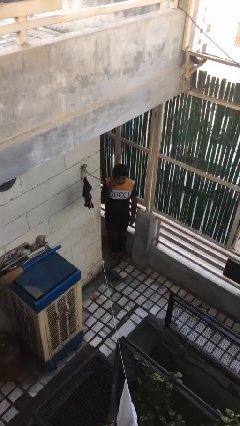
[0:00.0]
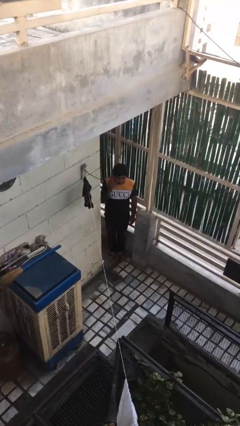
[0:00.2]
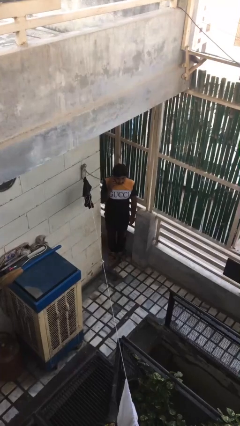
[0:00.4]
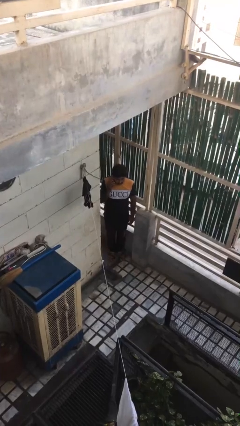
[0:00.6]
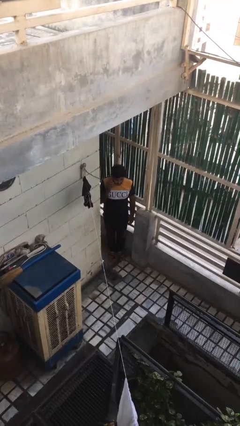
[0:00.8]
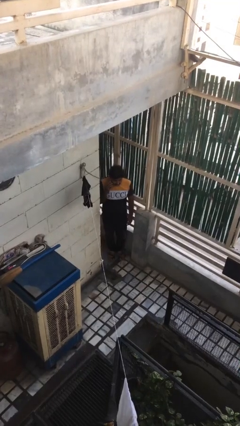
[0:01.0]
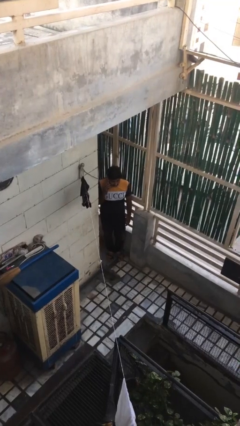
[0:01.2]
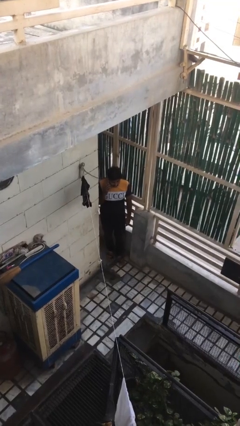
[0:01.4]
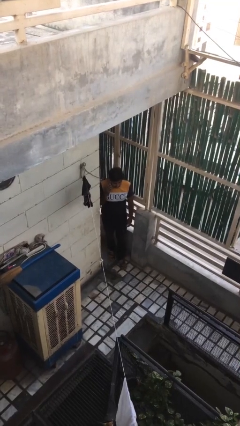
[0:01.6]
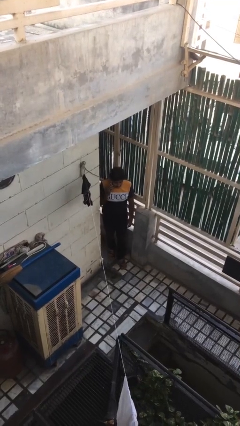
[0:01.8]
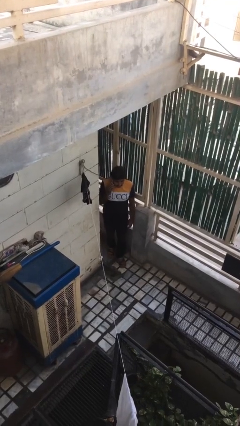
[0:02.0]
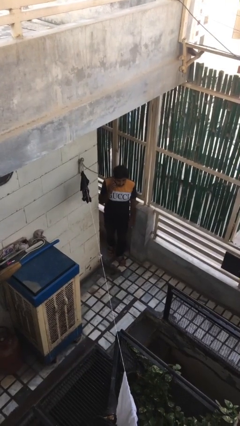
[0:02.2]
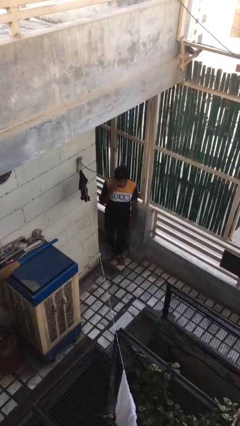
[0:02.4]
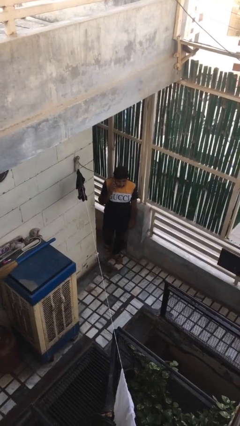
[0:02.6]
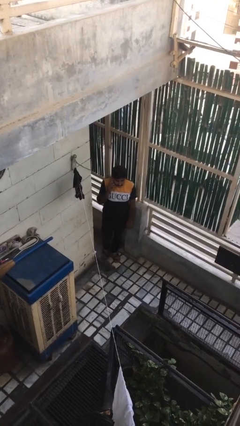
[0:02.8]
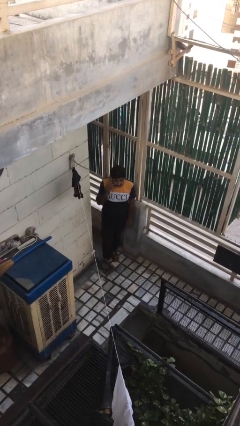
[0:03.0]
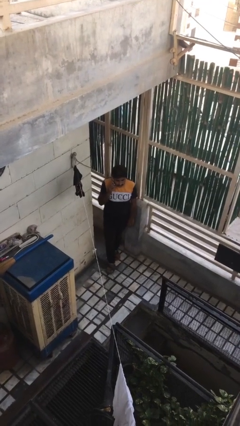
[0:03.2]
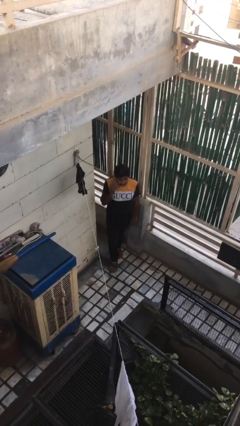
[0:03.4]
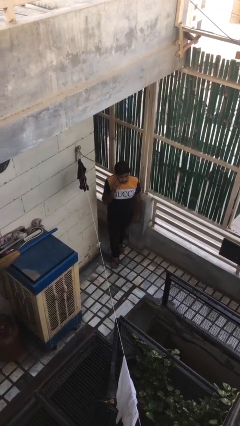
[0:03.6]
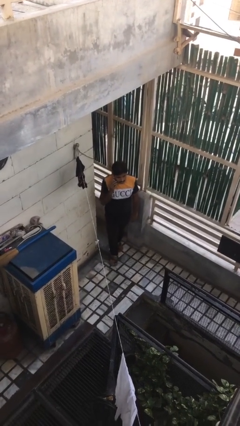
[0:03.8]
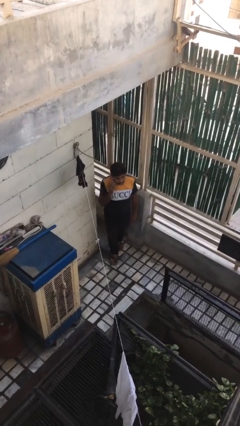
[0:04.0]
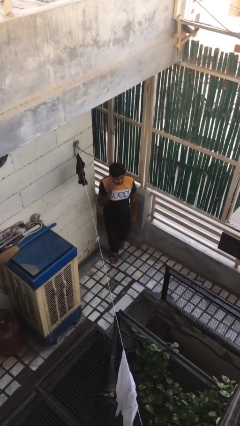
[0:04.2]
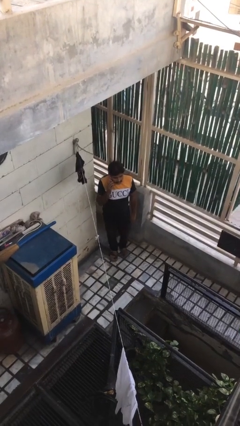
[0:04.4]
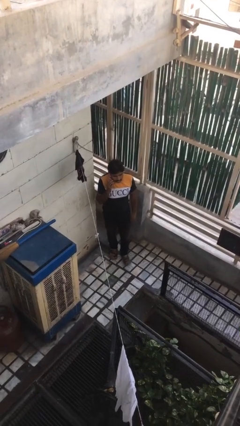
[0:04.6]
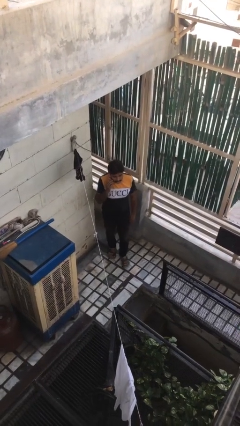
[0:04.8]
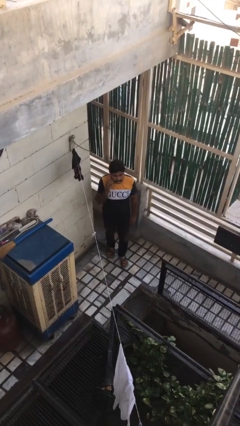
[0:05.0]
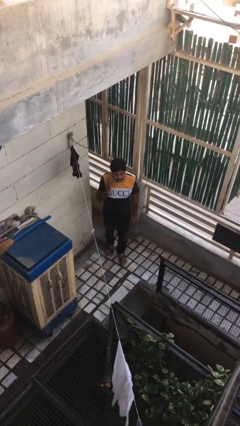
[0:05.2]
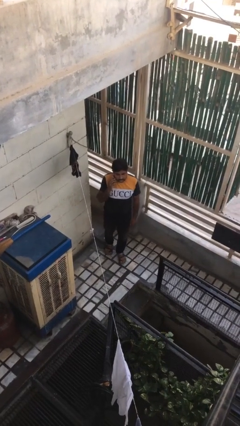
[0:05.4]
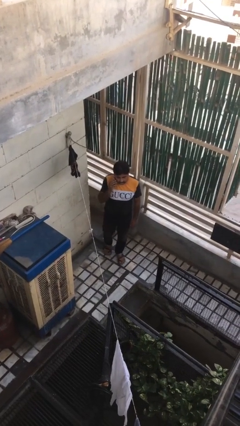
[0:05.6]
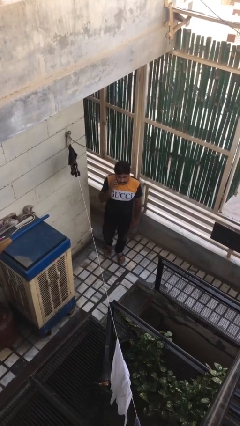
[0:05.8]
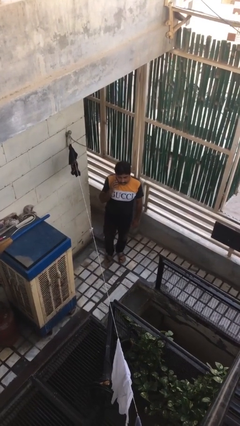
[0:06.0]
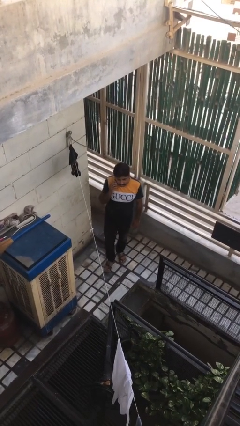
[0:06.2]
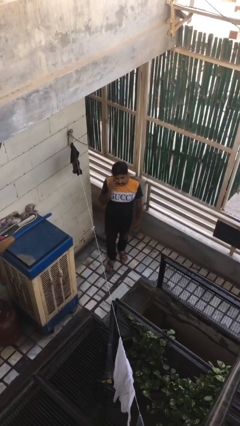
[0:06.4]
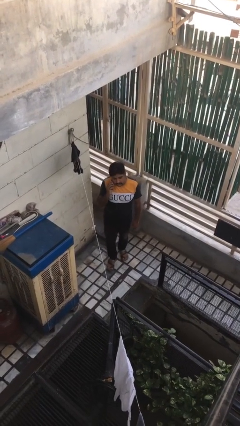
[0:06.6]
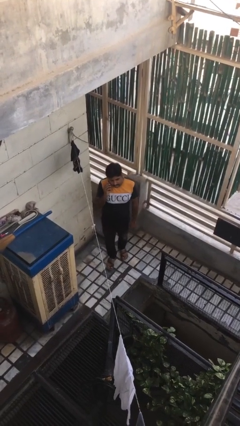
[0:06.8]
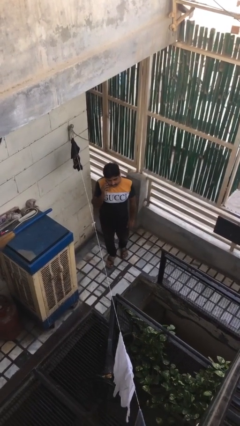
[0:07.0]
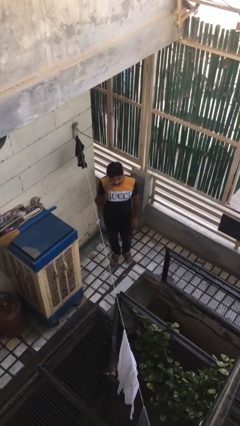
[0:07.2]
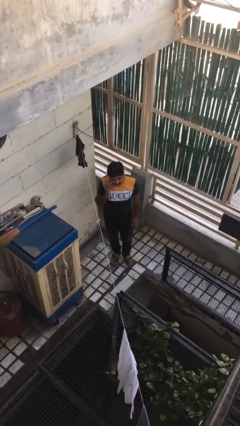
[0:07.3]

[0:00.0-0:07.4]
person exits scene through structure

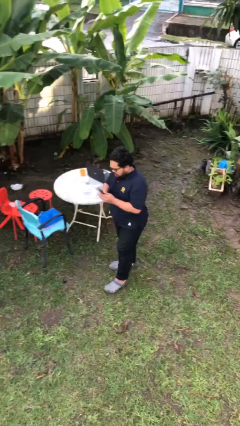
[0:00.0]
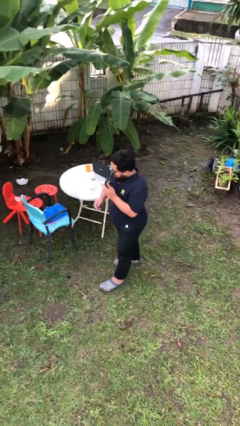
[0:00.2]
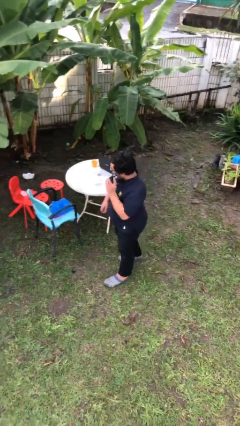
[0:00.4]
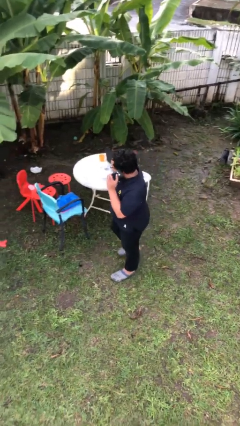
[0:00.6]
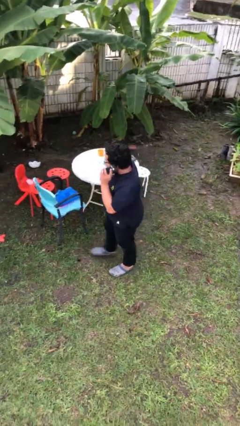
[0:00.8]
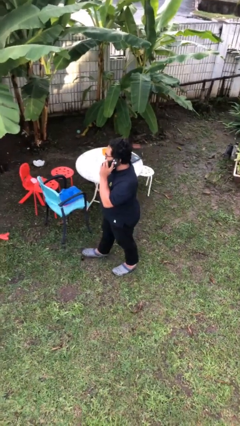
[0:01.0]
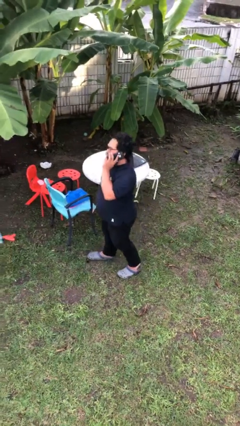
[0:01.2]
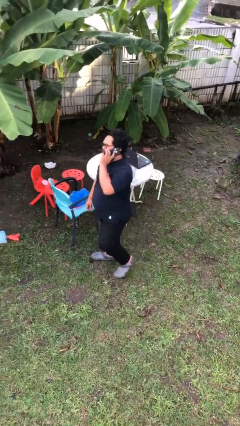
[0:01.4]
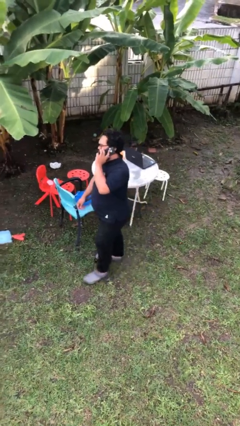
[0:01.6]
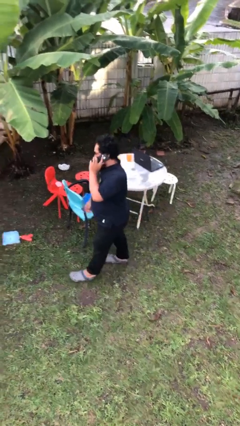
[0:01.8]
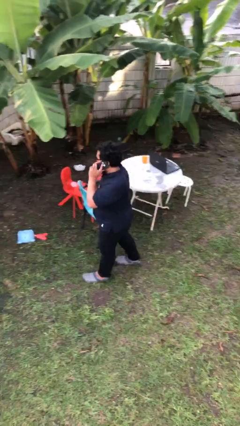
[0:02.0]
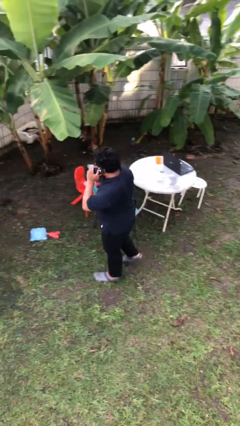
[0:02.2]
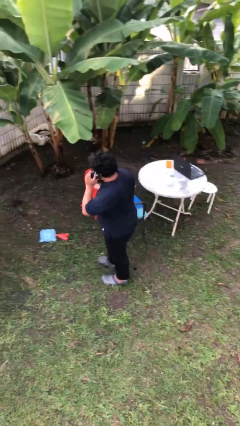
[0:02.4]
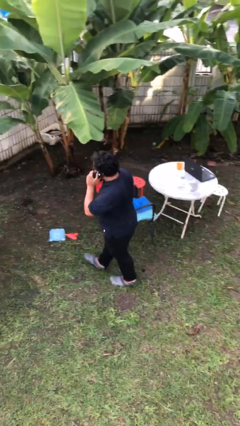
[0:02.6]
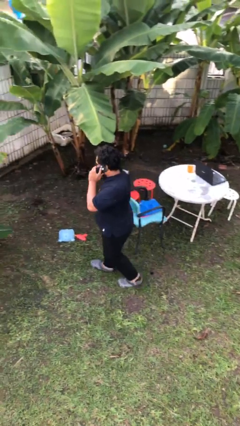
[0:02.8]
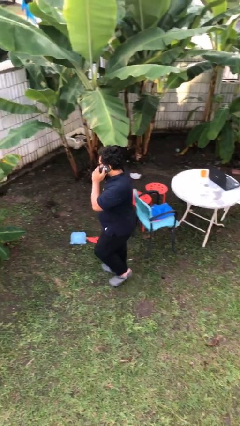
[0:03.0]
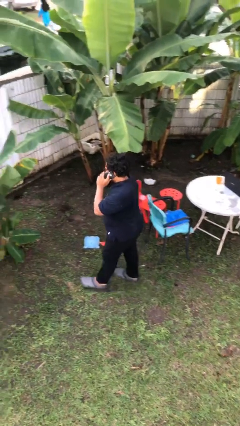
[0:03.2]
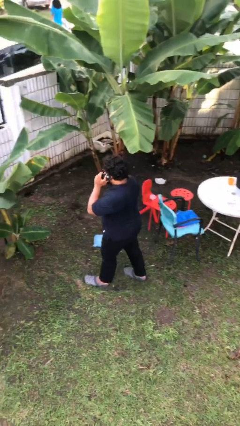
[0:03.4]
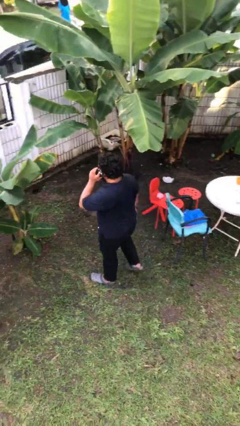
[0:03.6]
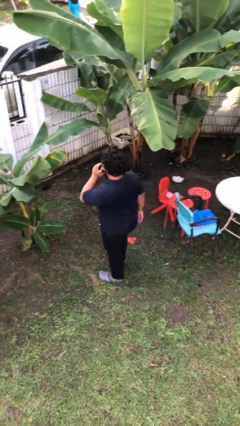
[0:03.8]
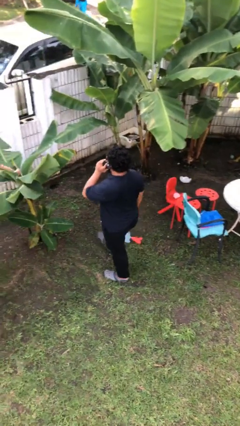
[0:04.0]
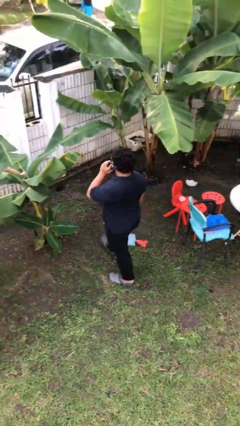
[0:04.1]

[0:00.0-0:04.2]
person talks on phone

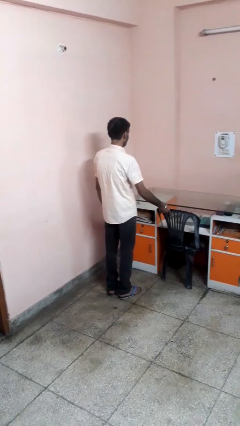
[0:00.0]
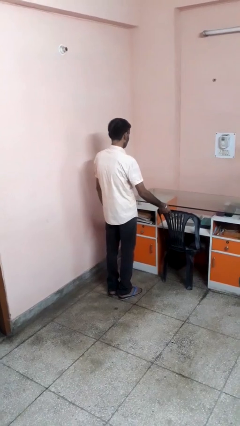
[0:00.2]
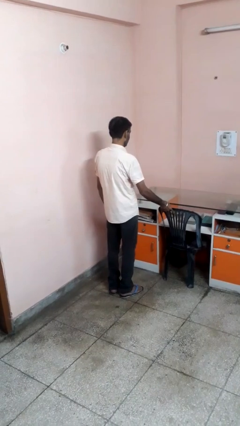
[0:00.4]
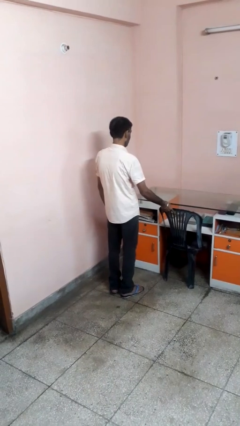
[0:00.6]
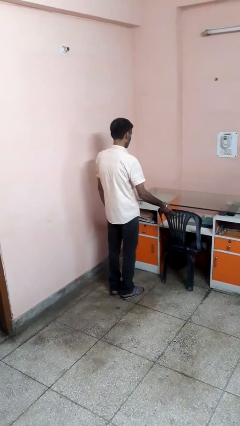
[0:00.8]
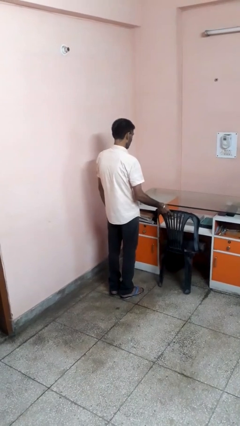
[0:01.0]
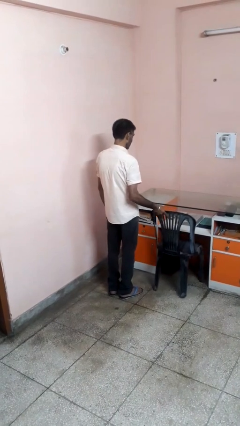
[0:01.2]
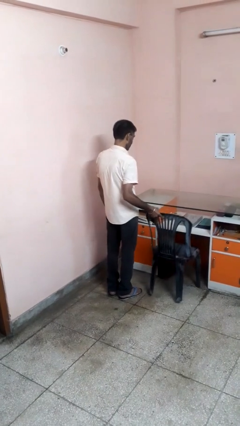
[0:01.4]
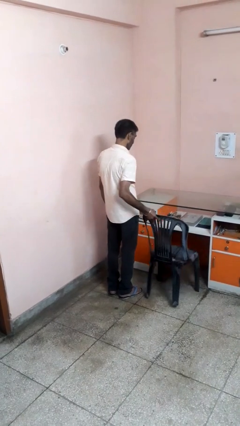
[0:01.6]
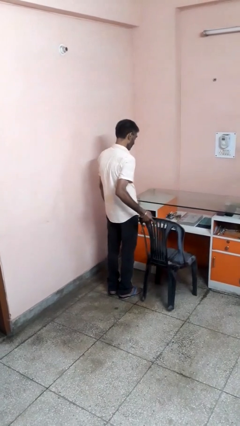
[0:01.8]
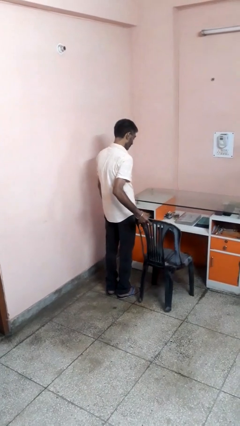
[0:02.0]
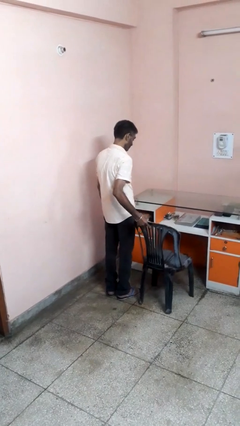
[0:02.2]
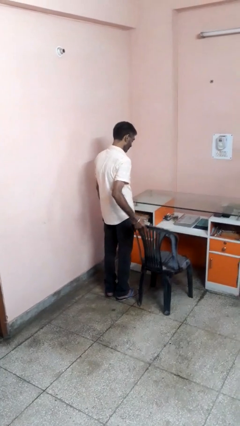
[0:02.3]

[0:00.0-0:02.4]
person pulls out chair

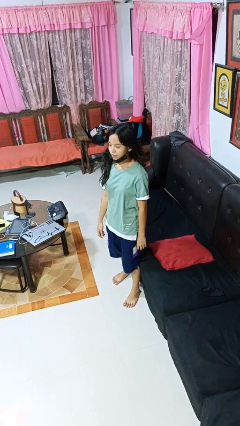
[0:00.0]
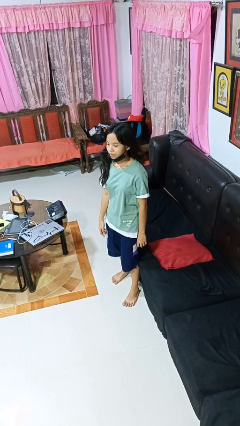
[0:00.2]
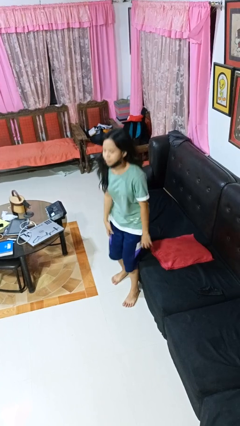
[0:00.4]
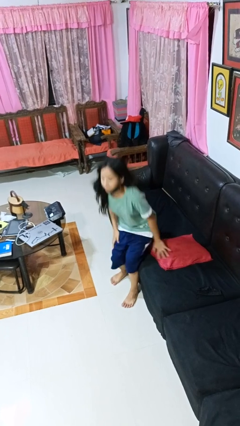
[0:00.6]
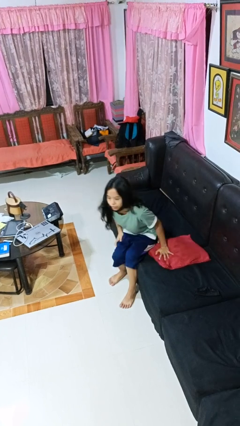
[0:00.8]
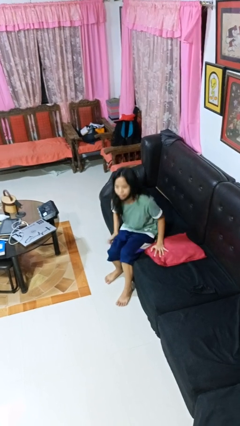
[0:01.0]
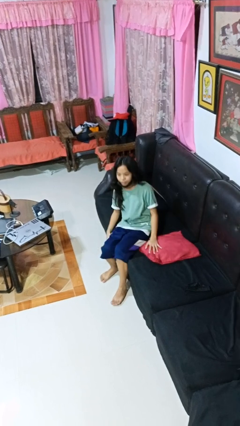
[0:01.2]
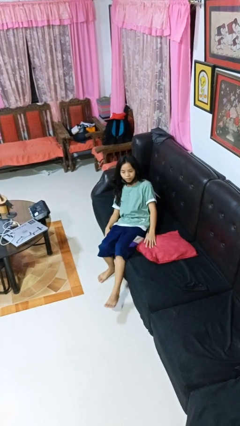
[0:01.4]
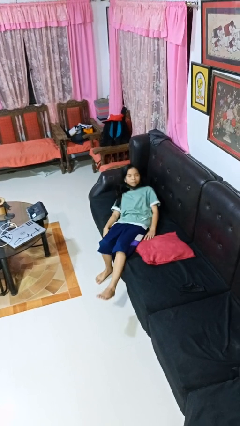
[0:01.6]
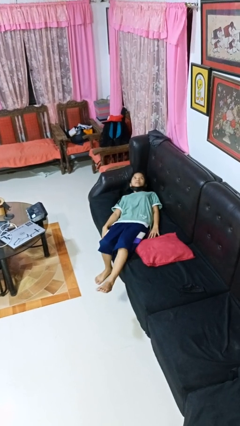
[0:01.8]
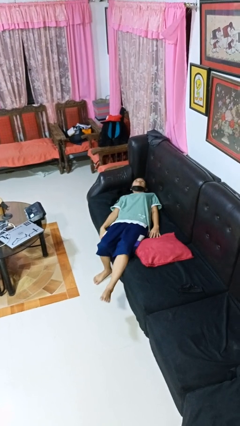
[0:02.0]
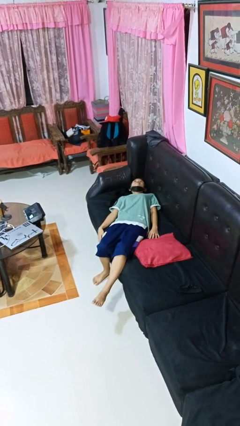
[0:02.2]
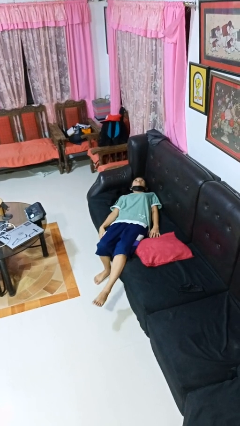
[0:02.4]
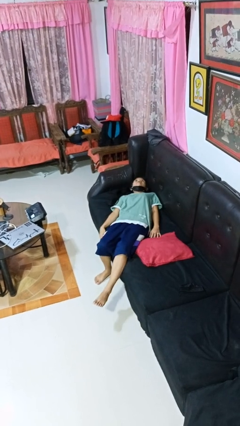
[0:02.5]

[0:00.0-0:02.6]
person lies down on couch

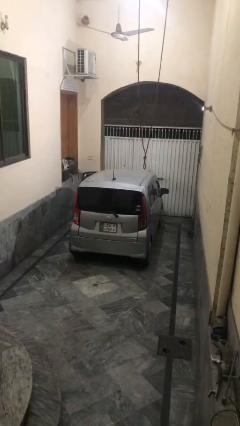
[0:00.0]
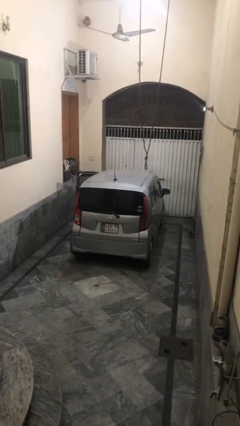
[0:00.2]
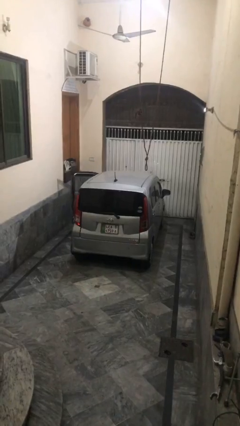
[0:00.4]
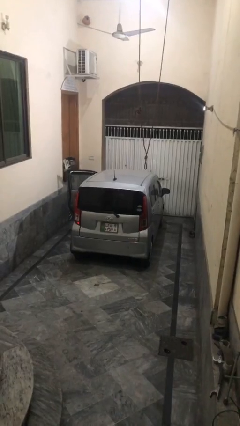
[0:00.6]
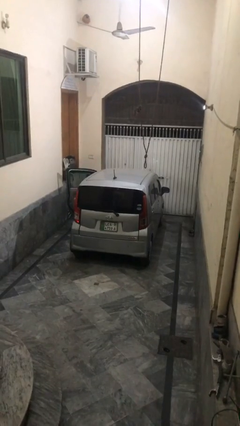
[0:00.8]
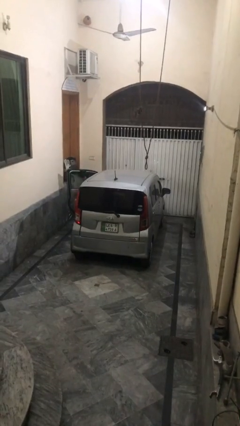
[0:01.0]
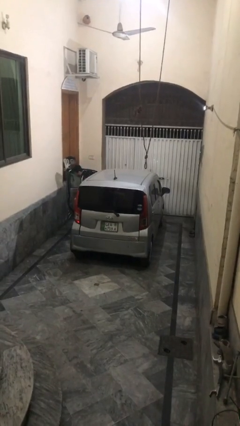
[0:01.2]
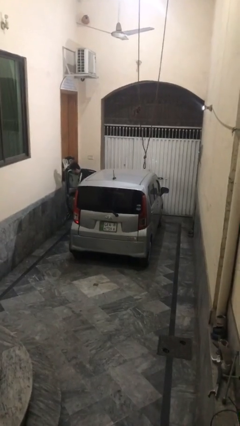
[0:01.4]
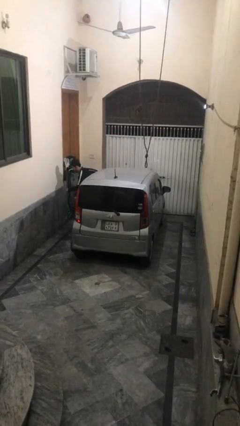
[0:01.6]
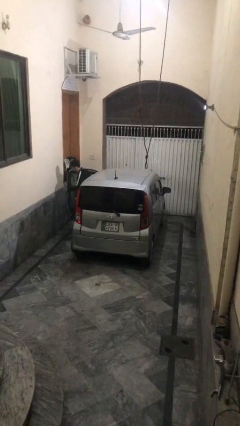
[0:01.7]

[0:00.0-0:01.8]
car drops off person
